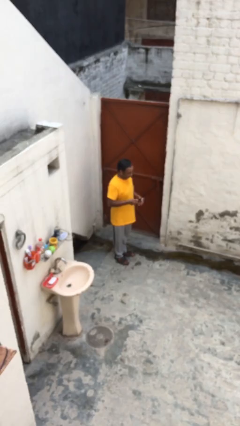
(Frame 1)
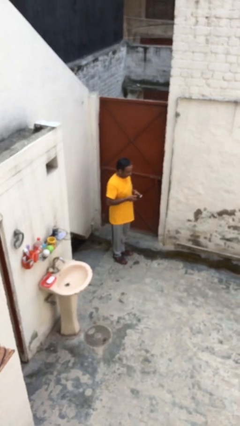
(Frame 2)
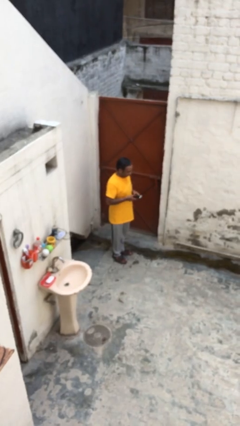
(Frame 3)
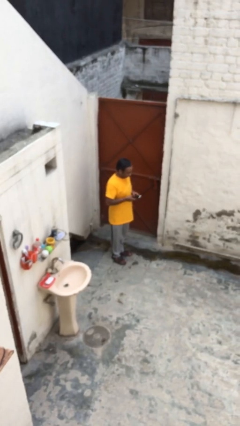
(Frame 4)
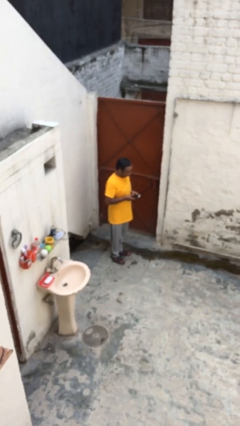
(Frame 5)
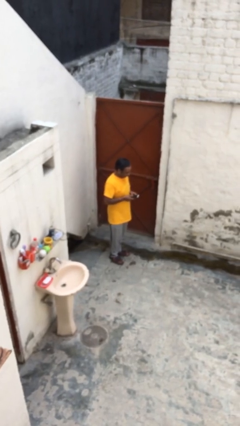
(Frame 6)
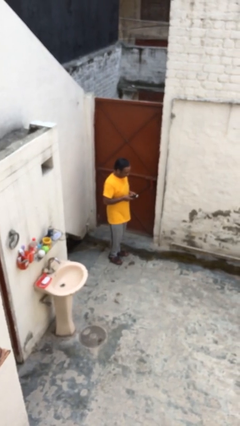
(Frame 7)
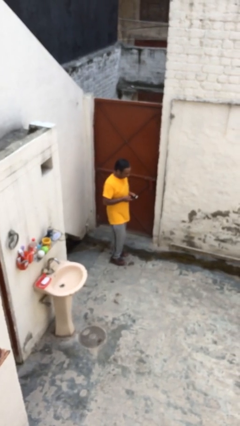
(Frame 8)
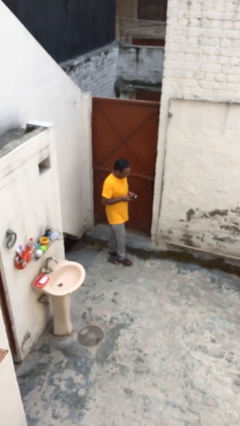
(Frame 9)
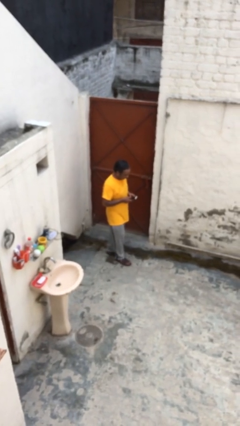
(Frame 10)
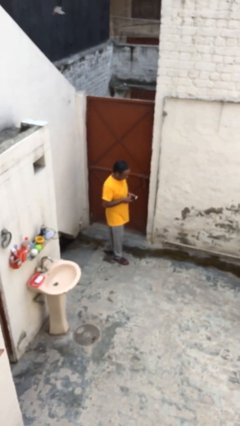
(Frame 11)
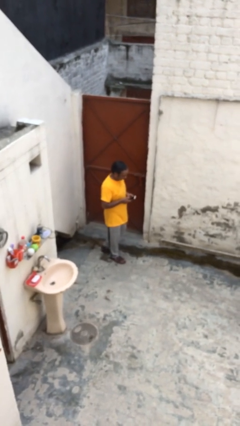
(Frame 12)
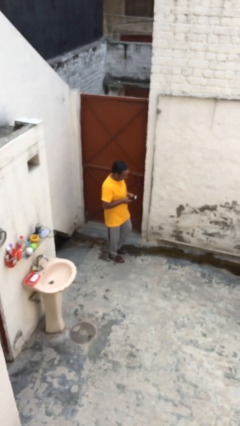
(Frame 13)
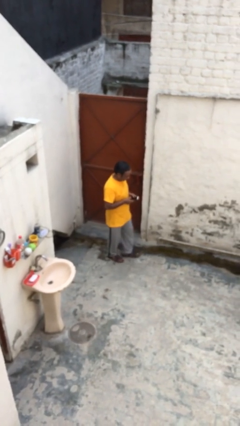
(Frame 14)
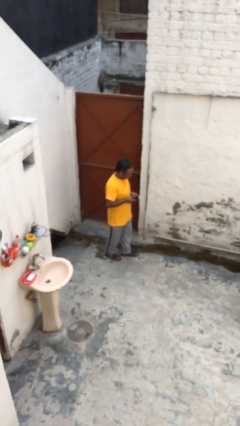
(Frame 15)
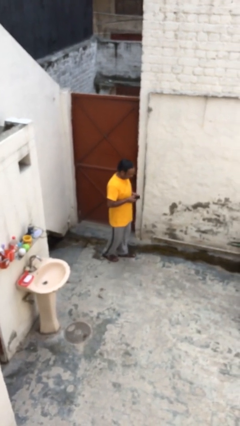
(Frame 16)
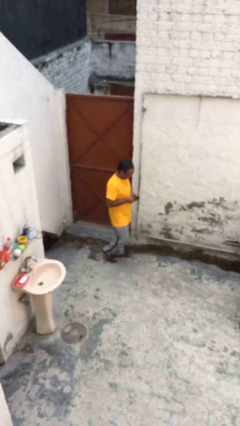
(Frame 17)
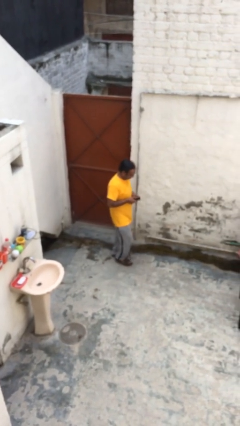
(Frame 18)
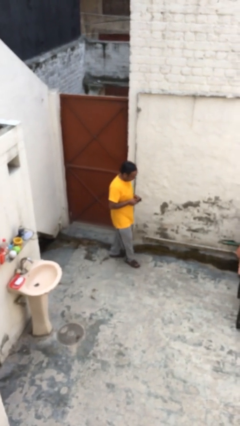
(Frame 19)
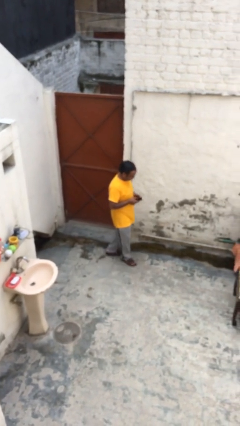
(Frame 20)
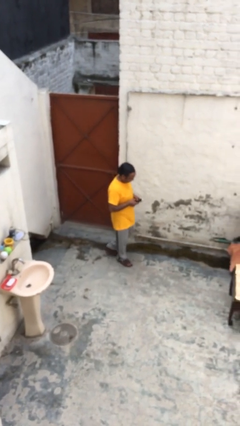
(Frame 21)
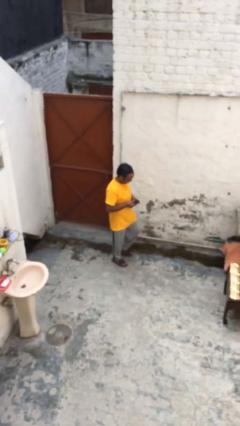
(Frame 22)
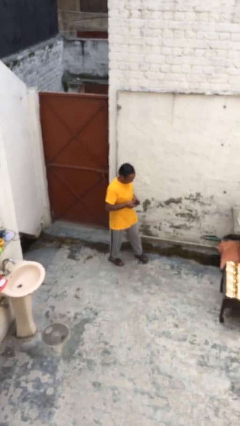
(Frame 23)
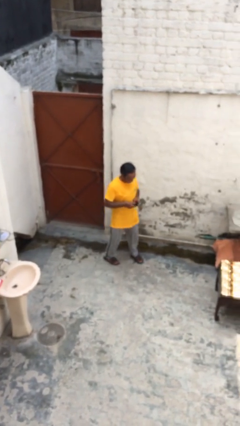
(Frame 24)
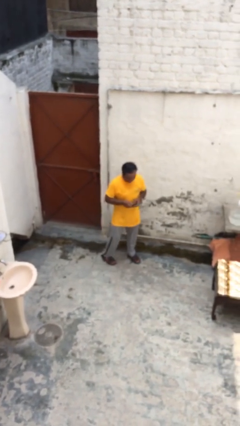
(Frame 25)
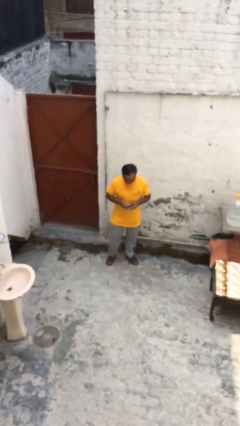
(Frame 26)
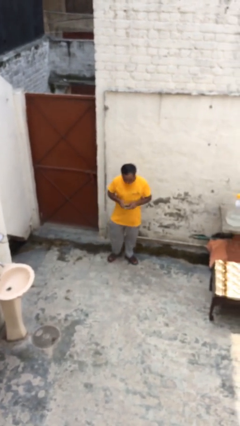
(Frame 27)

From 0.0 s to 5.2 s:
person texts on phone

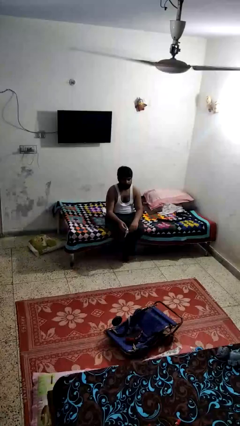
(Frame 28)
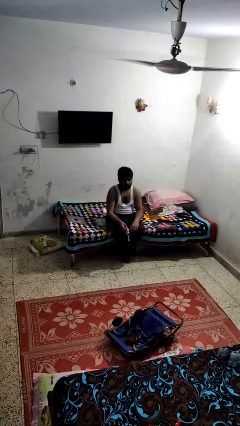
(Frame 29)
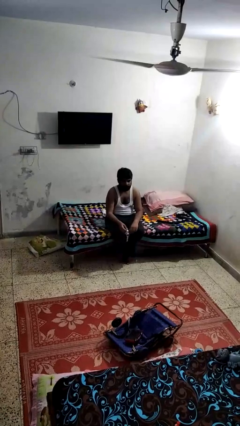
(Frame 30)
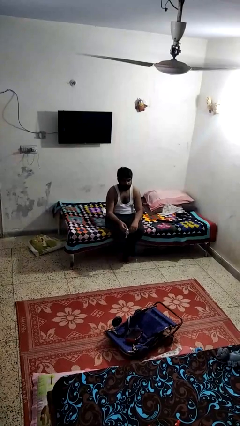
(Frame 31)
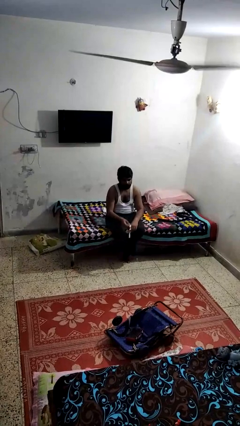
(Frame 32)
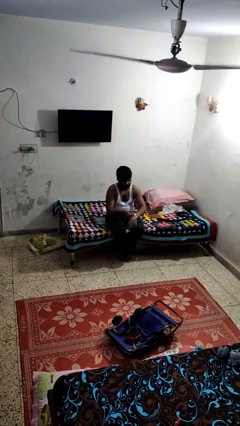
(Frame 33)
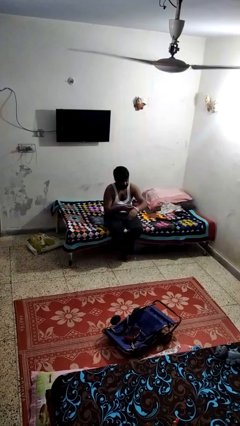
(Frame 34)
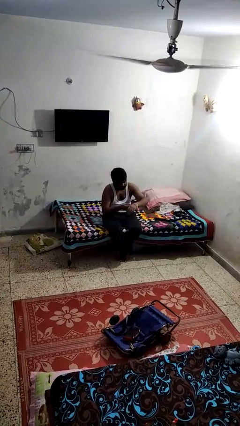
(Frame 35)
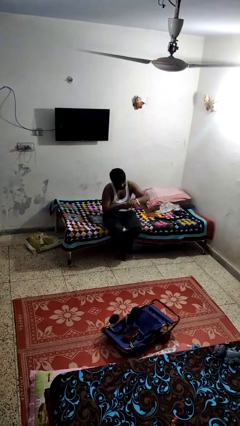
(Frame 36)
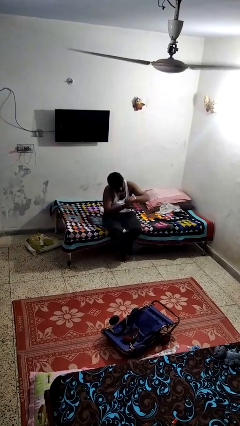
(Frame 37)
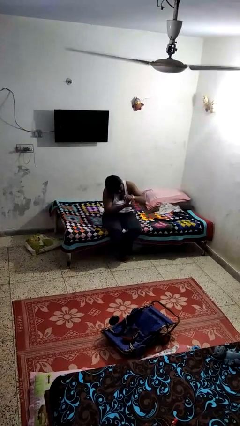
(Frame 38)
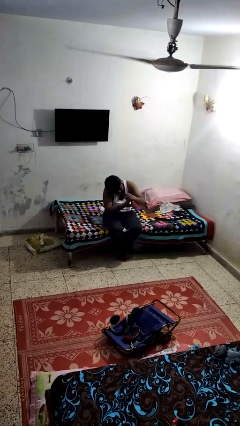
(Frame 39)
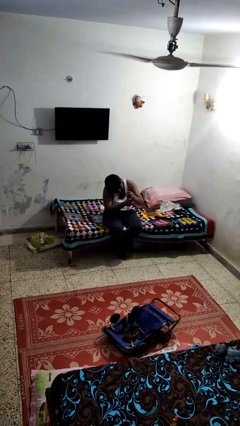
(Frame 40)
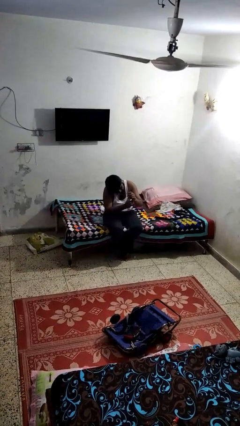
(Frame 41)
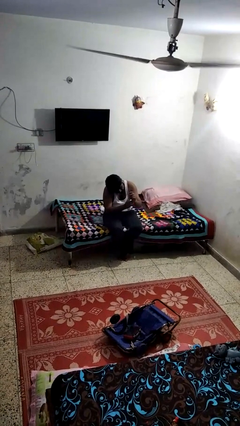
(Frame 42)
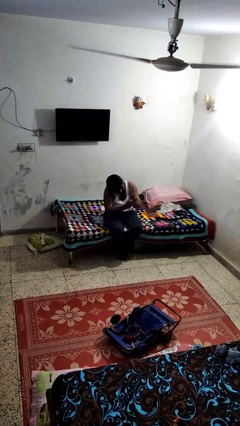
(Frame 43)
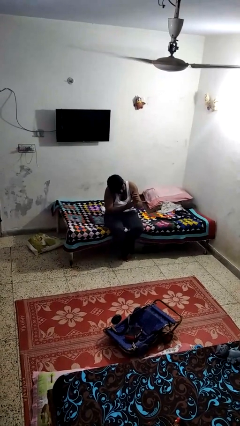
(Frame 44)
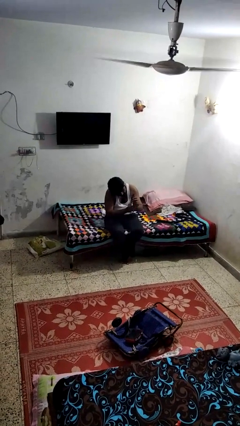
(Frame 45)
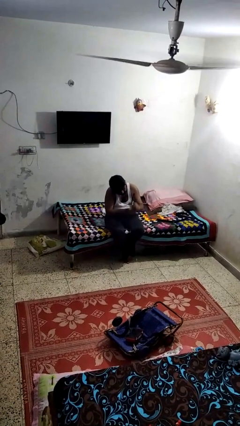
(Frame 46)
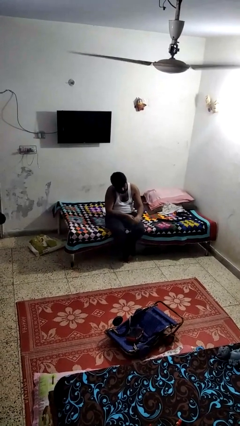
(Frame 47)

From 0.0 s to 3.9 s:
person puts on wristwatch

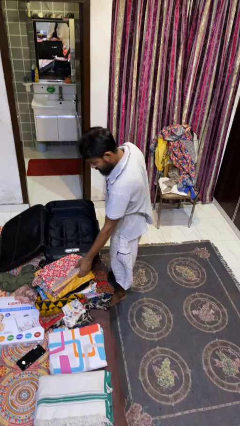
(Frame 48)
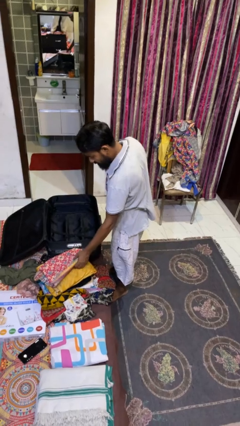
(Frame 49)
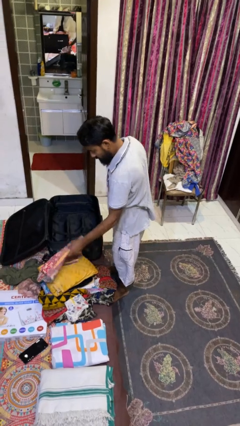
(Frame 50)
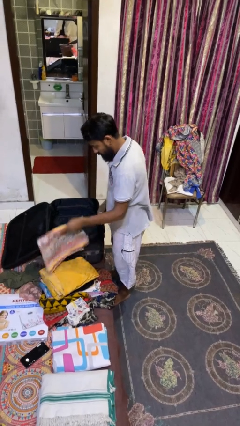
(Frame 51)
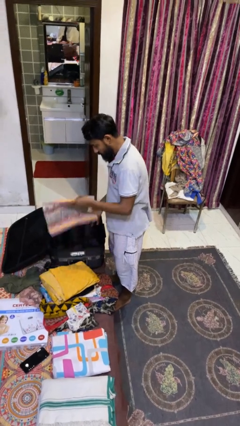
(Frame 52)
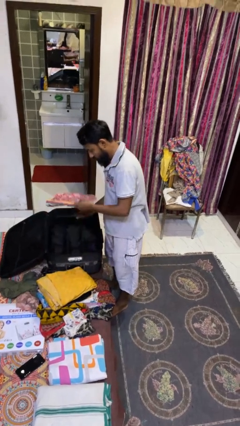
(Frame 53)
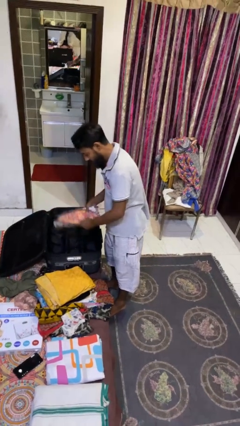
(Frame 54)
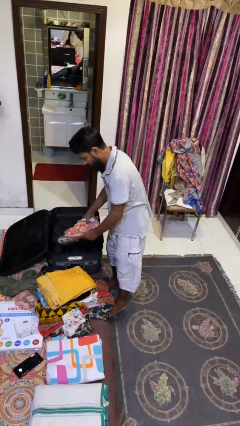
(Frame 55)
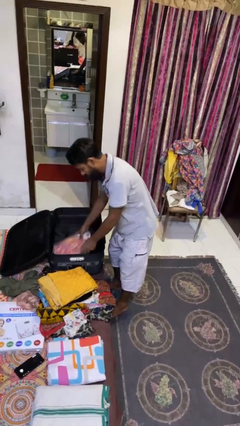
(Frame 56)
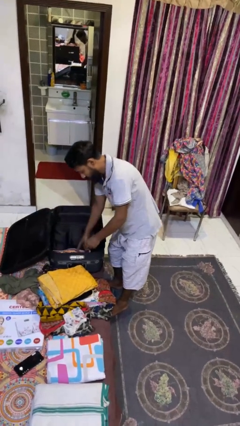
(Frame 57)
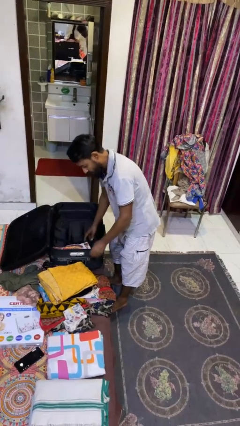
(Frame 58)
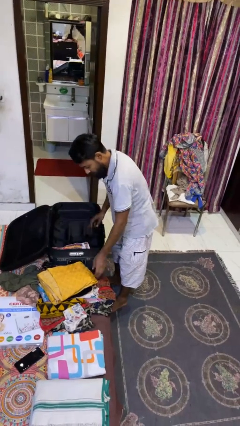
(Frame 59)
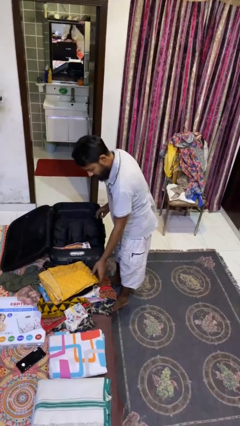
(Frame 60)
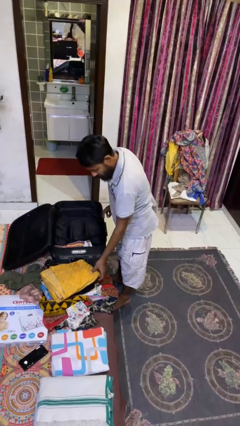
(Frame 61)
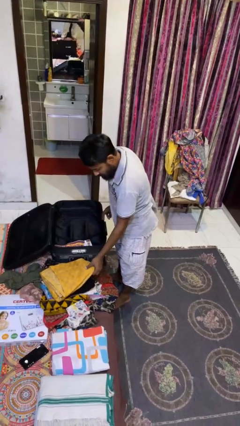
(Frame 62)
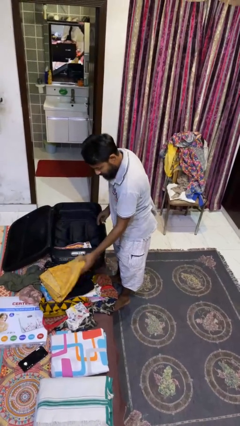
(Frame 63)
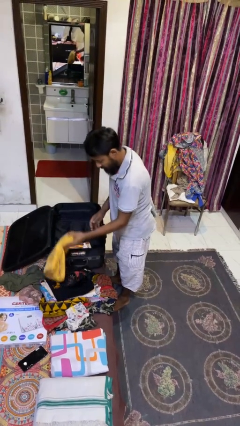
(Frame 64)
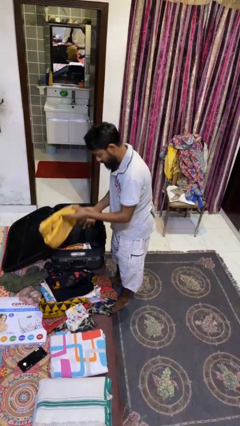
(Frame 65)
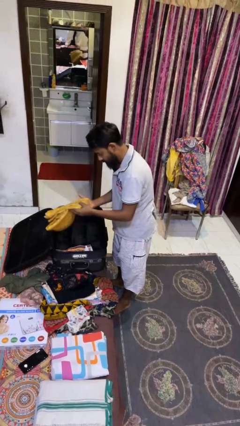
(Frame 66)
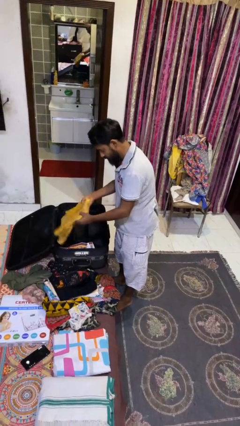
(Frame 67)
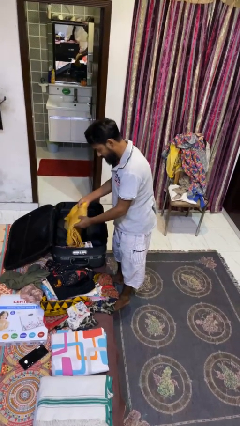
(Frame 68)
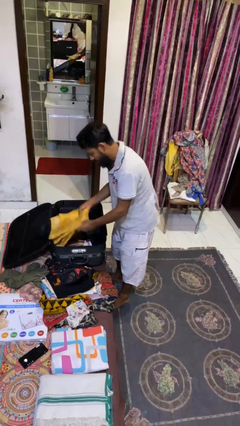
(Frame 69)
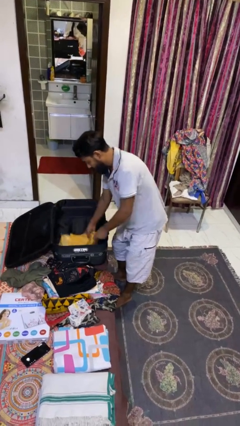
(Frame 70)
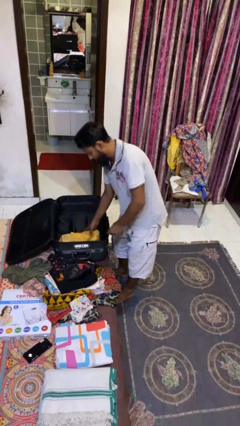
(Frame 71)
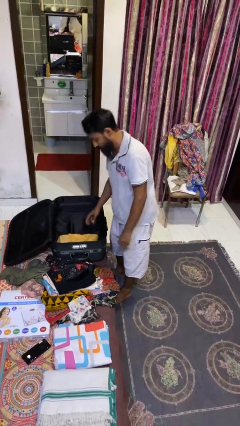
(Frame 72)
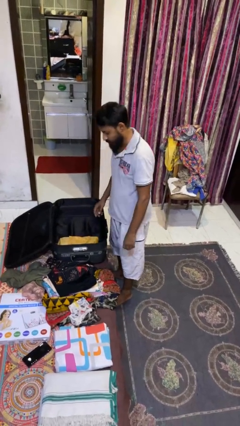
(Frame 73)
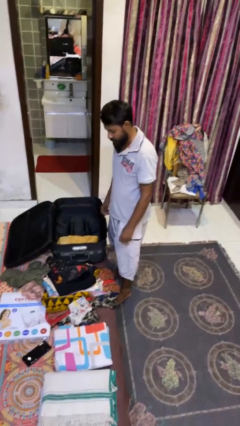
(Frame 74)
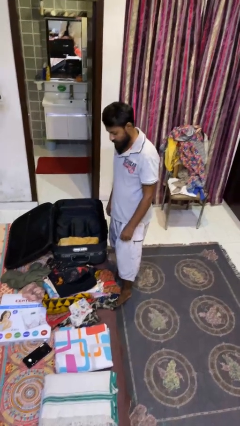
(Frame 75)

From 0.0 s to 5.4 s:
person loads clothes into suitcase

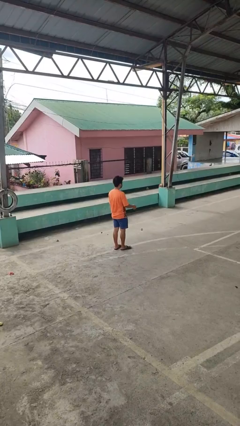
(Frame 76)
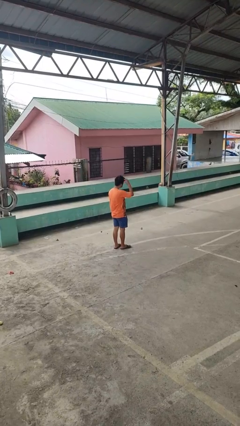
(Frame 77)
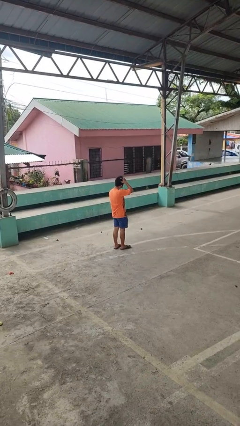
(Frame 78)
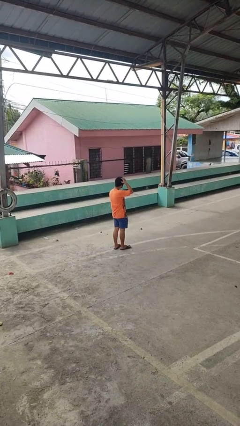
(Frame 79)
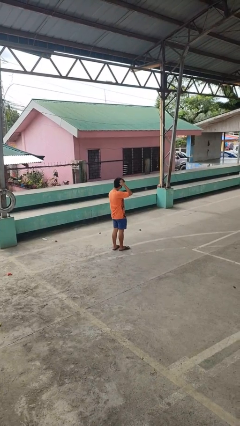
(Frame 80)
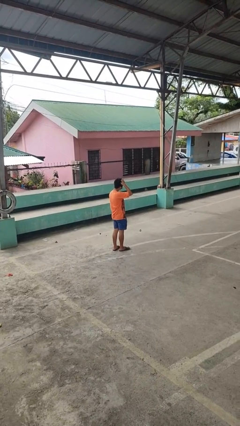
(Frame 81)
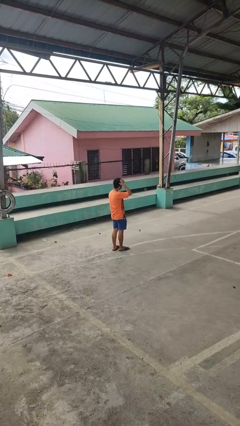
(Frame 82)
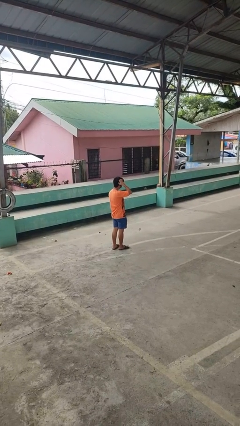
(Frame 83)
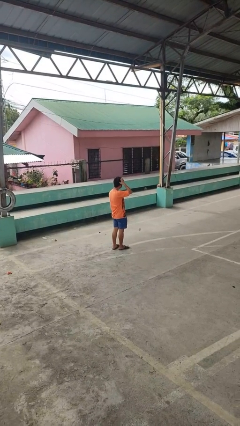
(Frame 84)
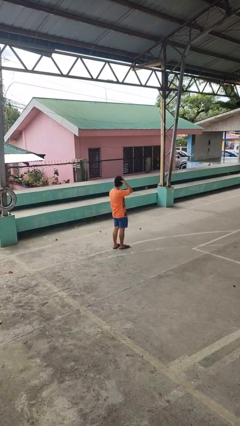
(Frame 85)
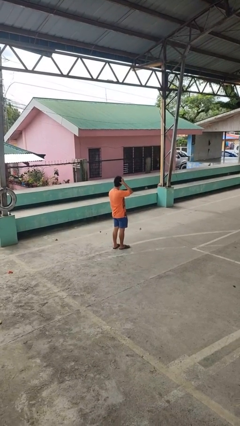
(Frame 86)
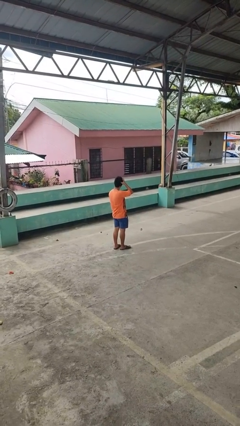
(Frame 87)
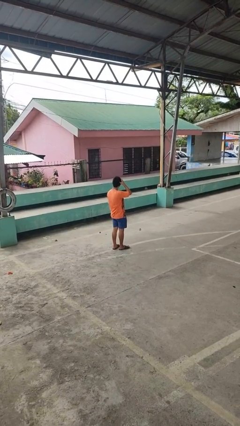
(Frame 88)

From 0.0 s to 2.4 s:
person scratches face

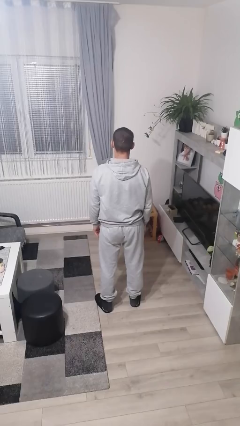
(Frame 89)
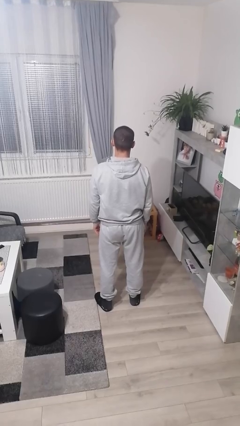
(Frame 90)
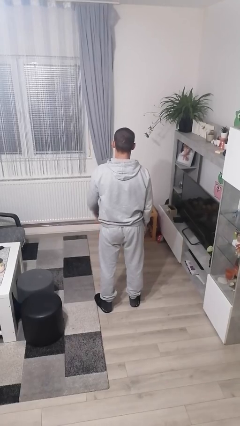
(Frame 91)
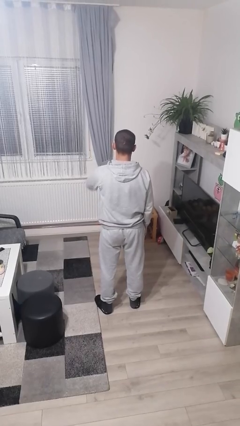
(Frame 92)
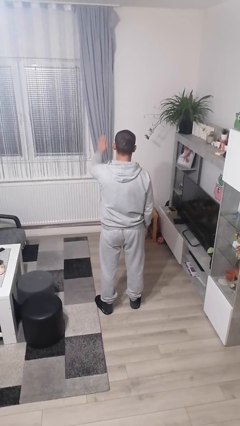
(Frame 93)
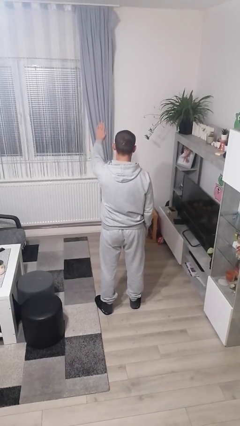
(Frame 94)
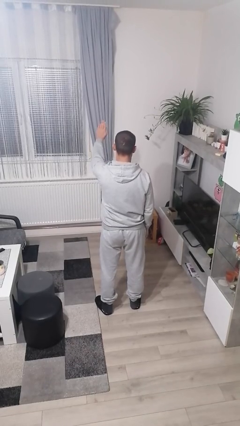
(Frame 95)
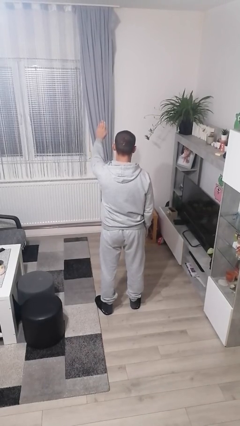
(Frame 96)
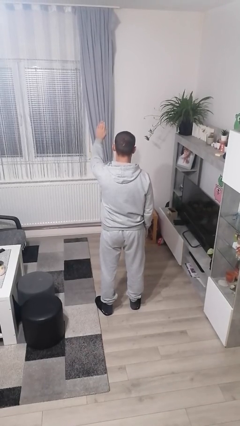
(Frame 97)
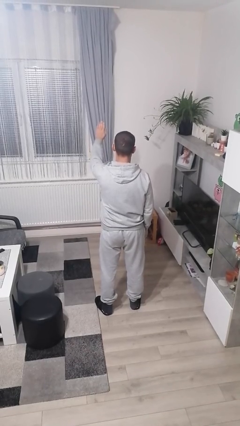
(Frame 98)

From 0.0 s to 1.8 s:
person gestures stop
